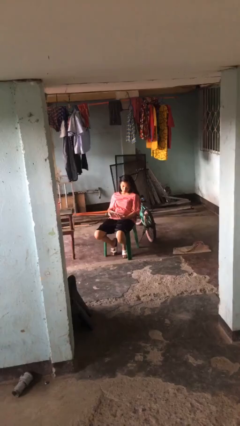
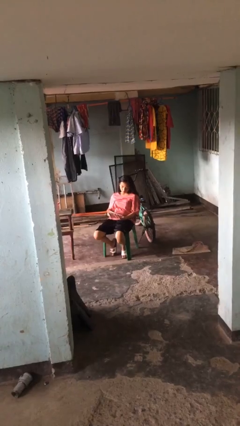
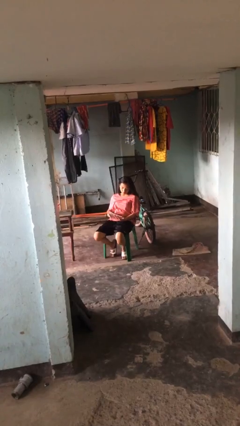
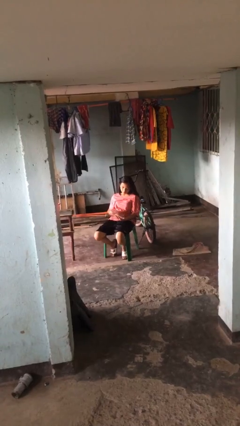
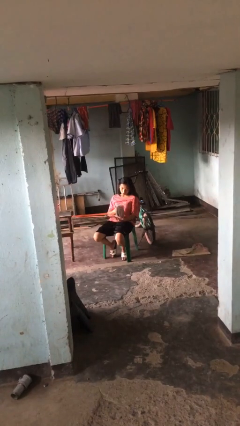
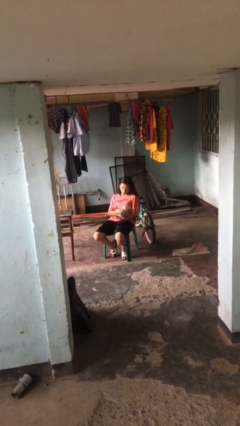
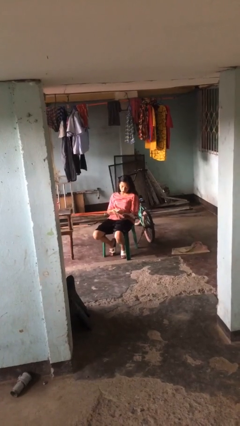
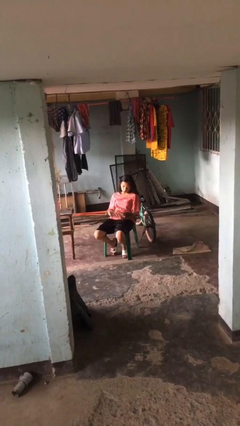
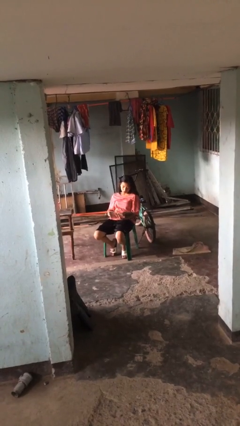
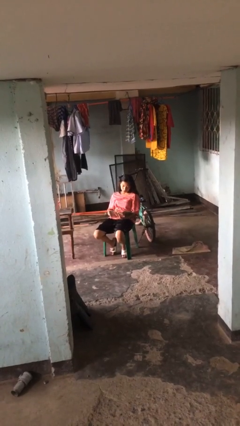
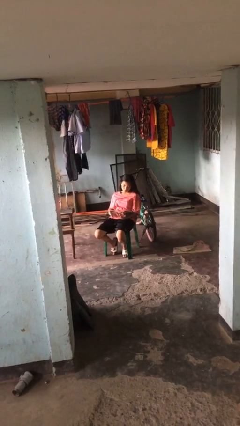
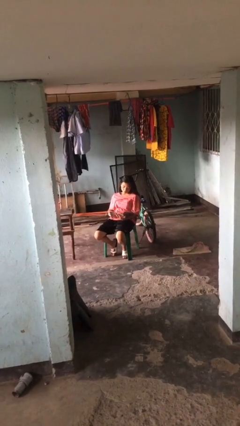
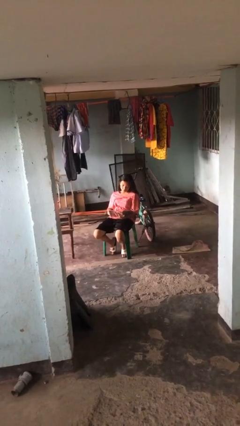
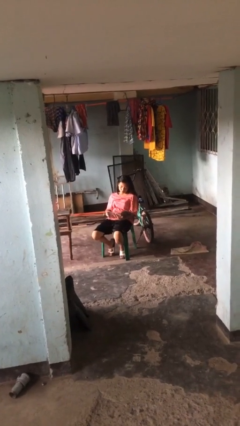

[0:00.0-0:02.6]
person reads document

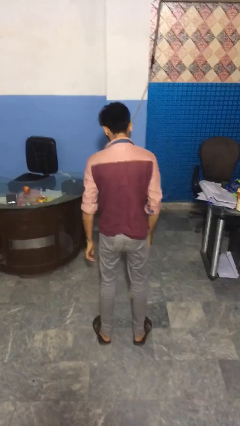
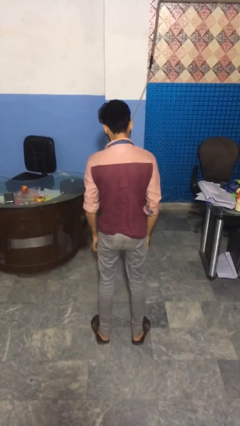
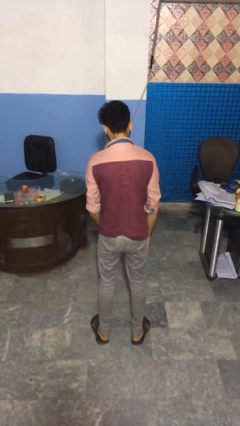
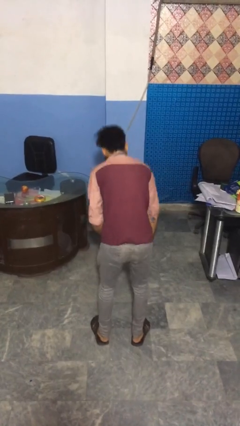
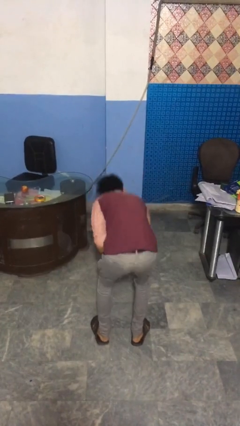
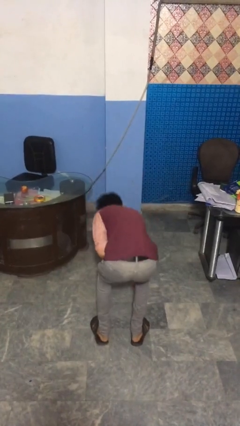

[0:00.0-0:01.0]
person picks up object from floor

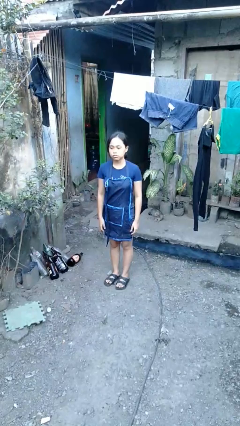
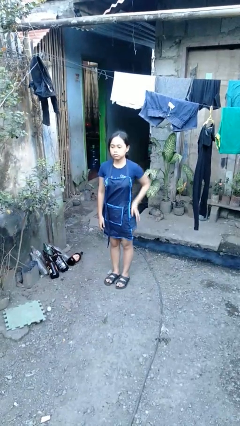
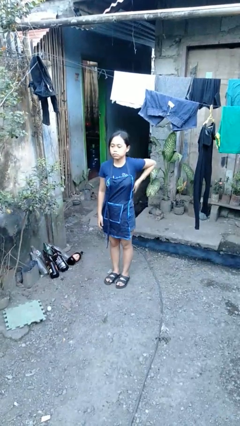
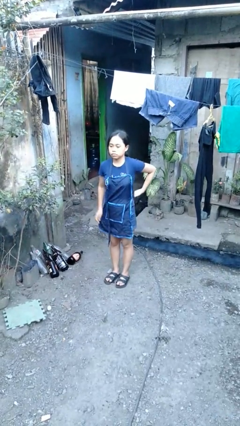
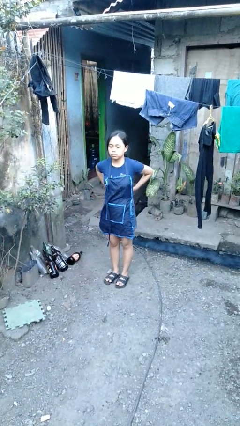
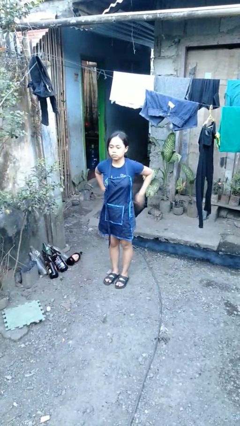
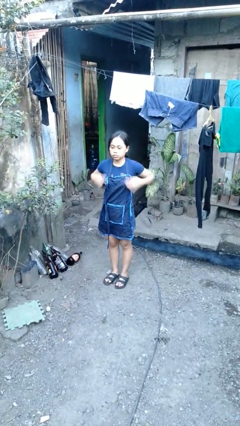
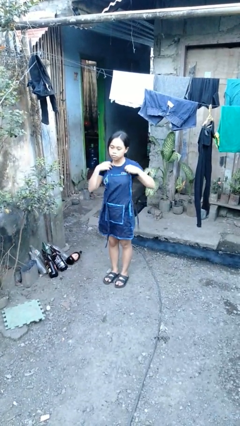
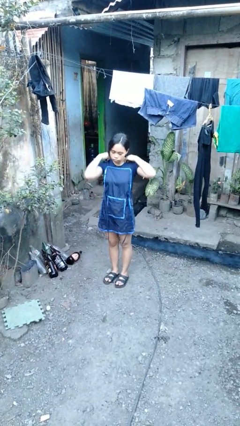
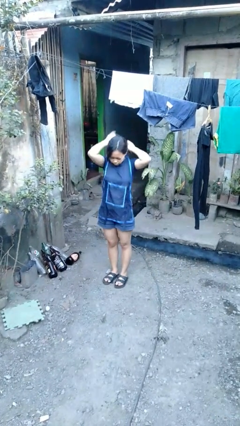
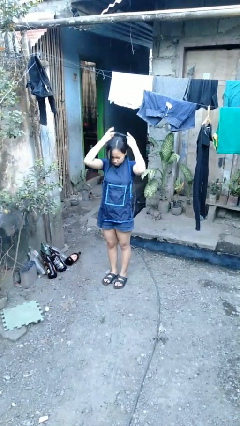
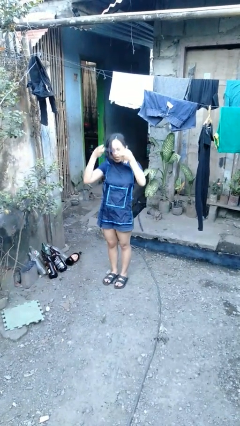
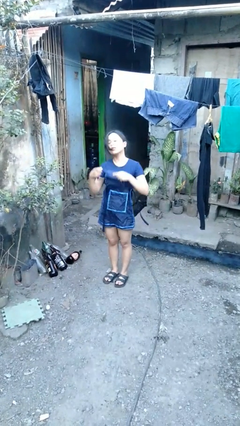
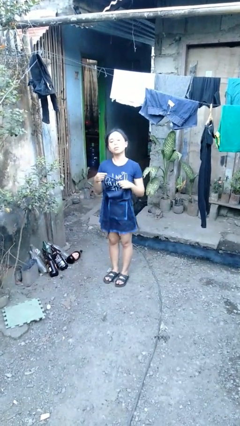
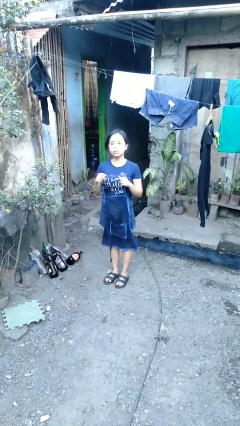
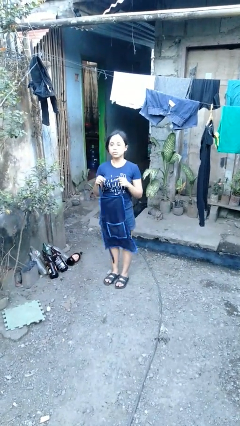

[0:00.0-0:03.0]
person takes off apron

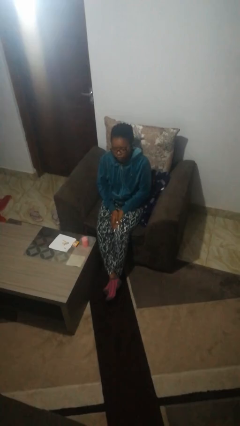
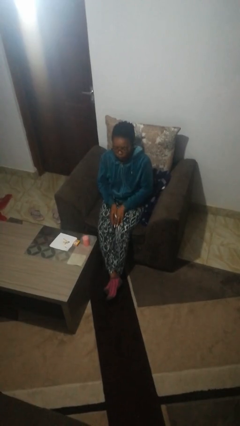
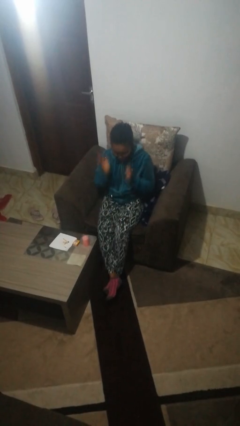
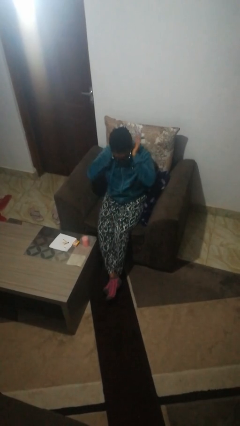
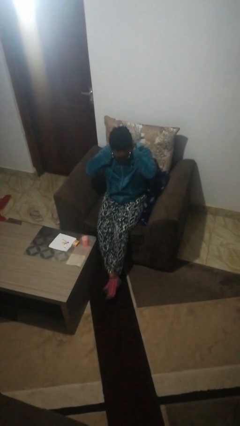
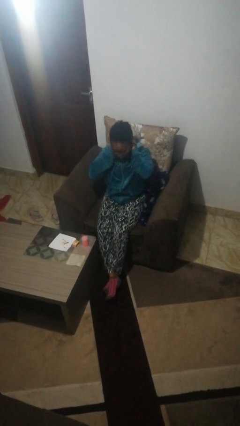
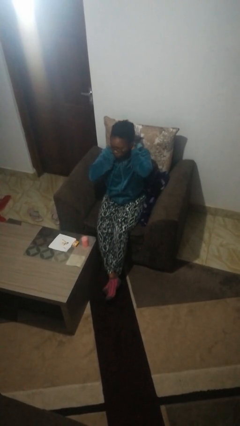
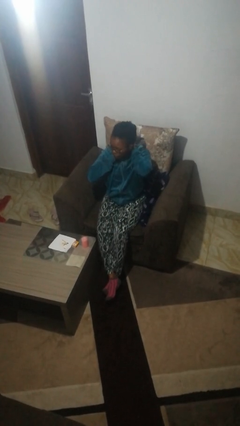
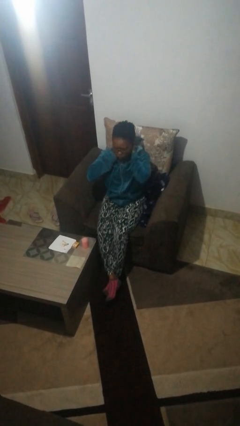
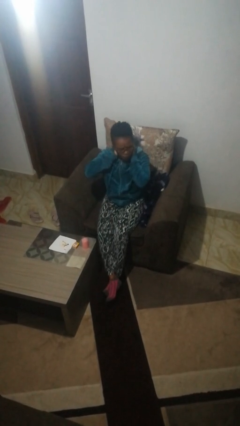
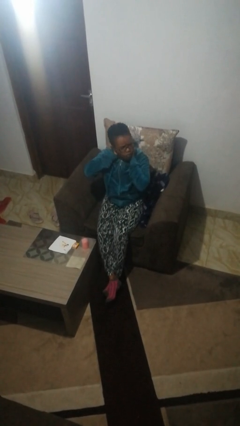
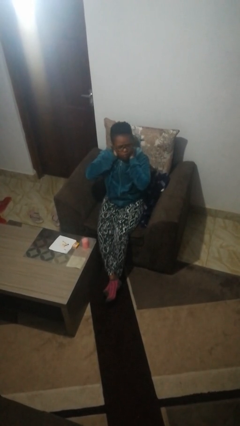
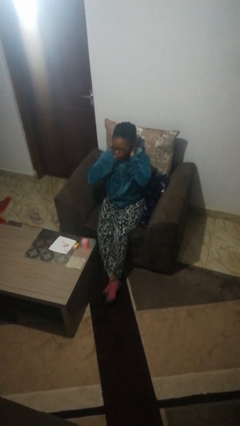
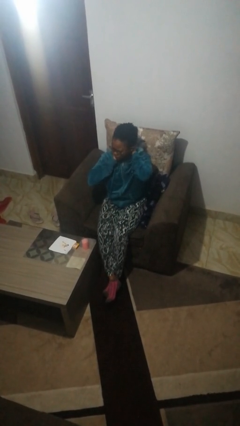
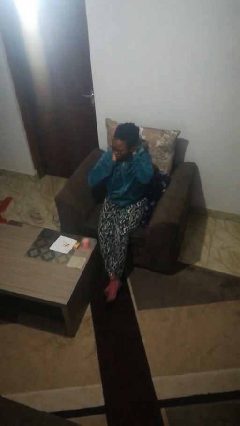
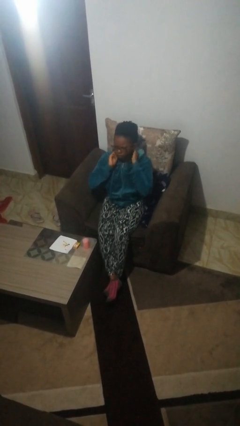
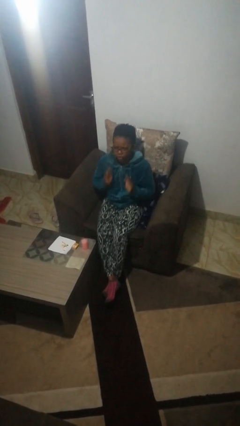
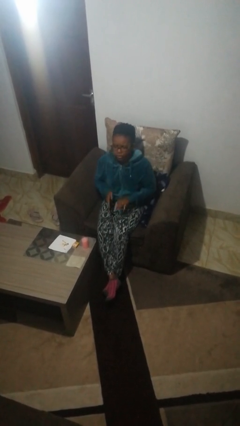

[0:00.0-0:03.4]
person rubs neck

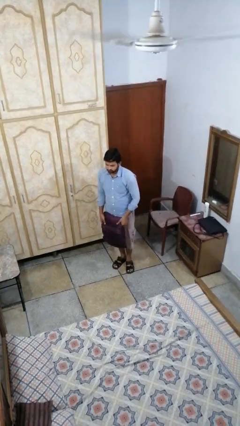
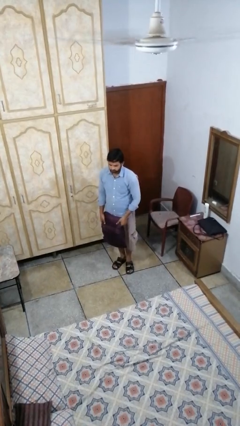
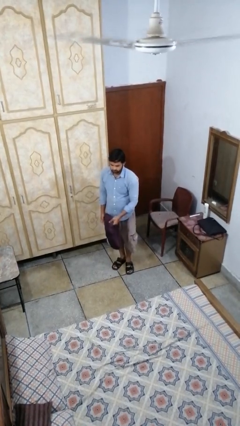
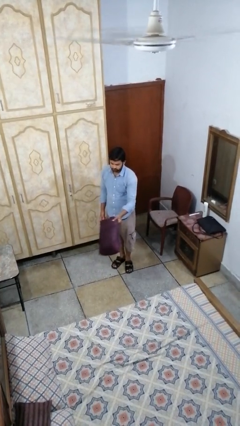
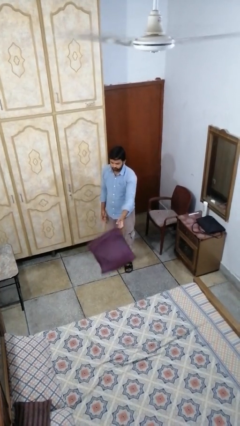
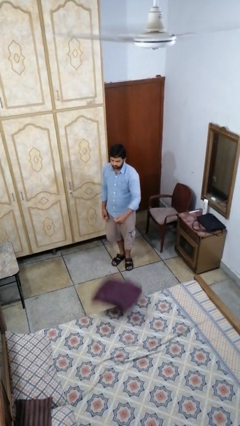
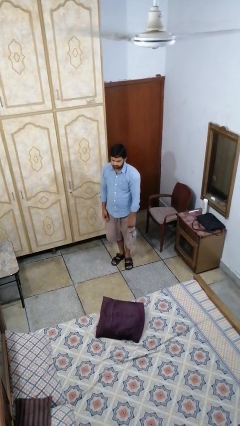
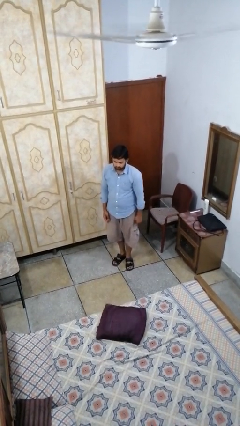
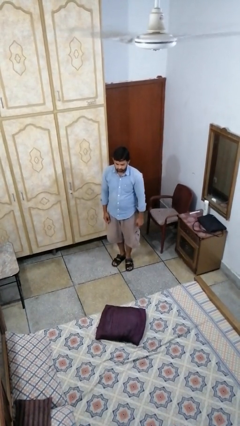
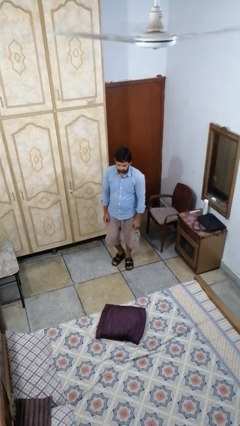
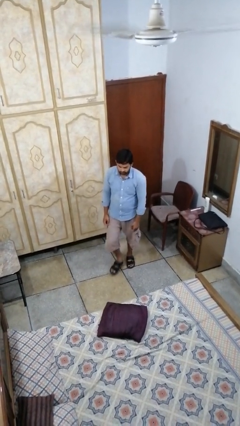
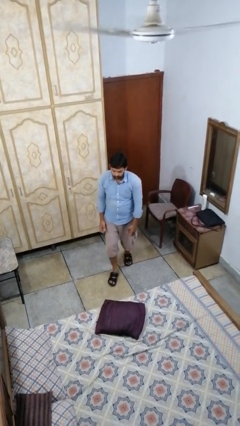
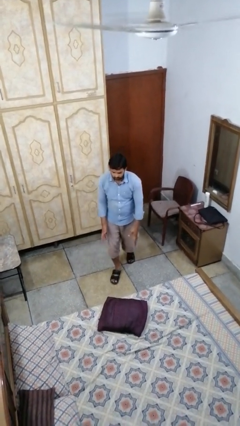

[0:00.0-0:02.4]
person throws object on bed

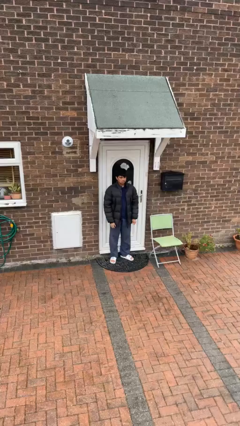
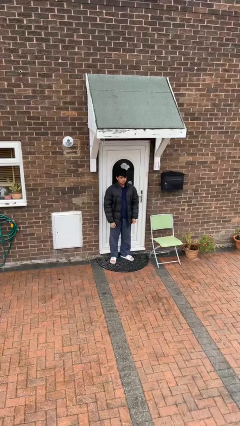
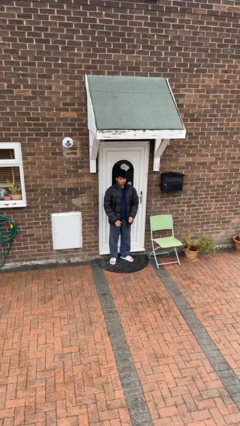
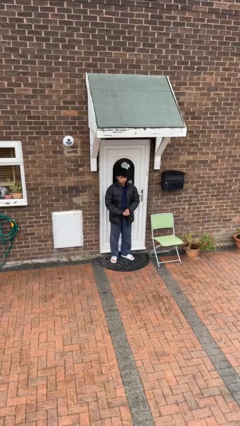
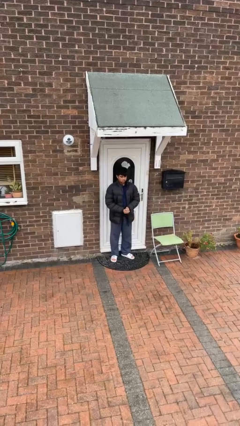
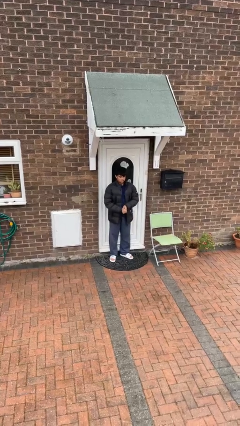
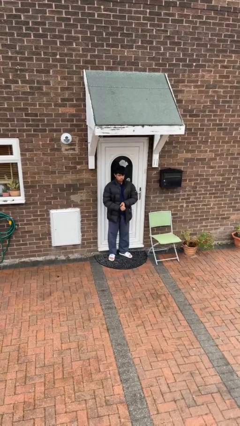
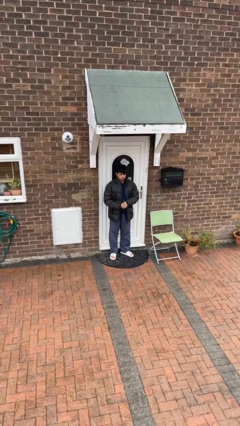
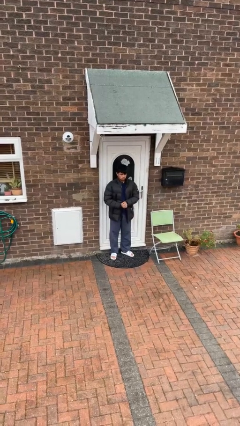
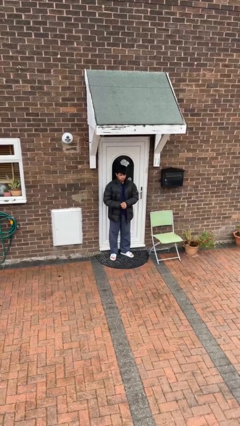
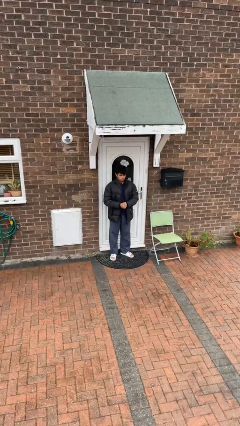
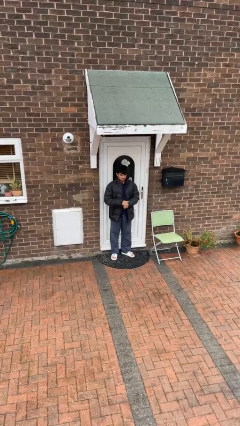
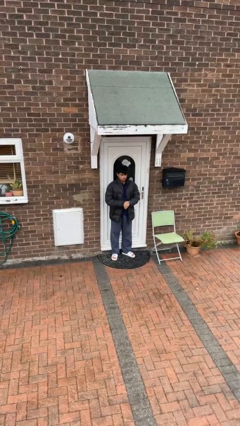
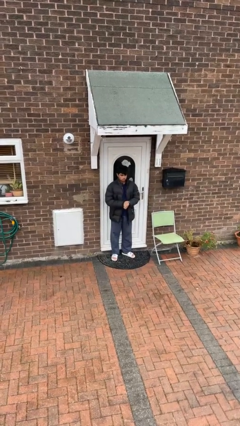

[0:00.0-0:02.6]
person cracks knuckles

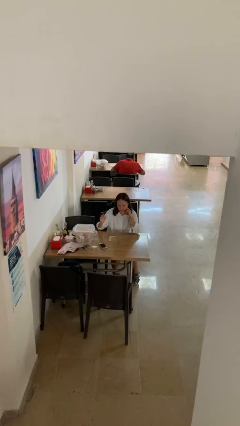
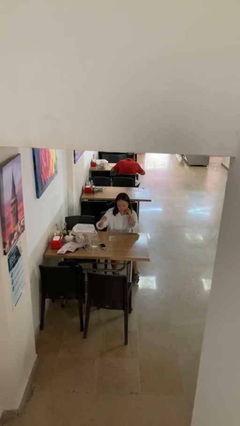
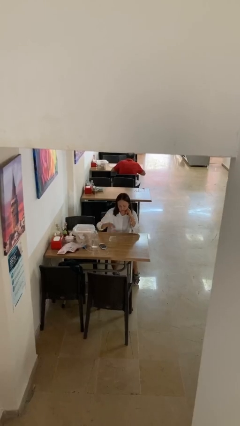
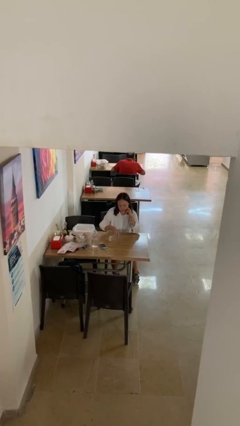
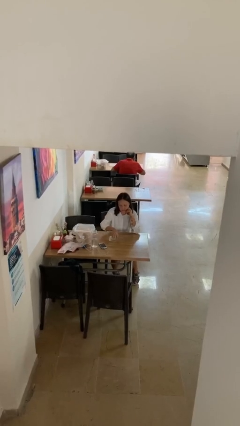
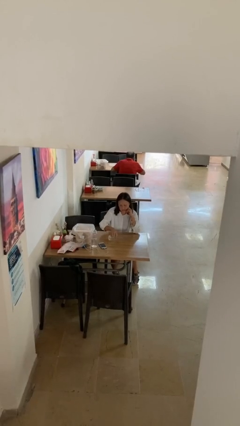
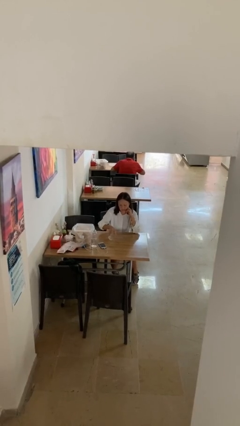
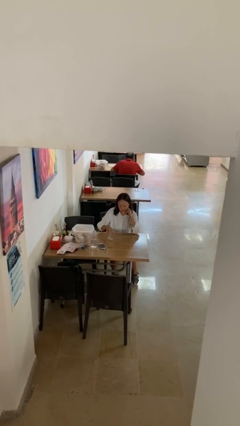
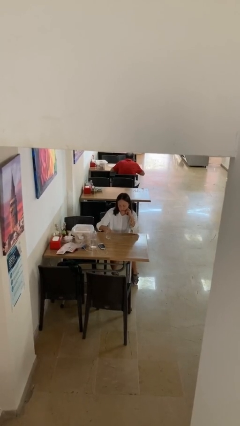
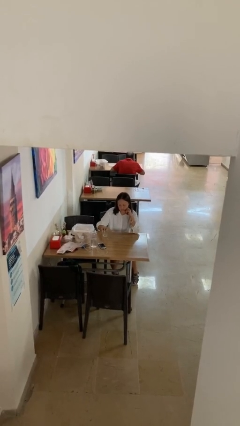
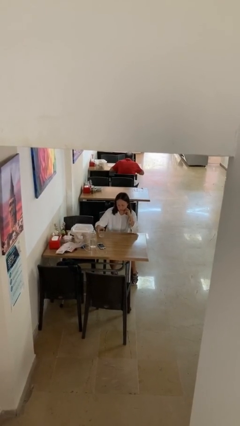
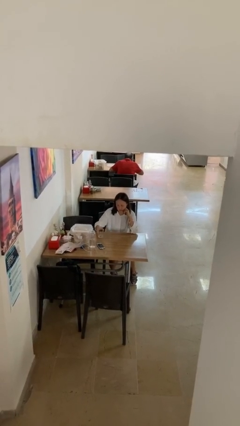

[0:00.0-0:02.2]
person sets upright glass
